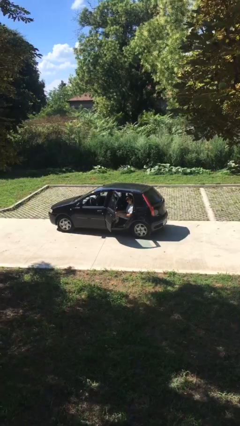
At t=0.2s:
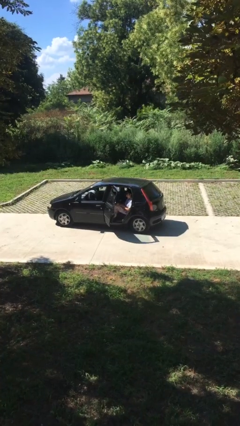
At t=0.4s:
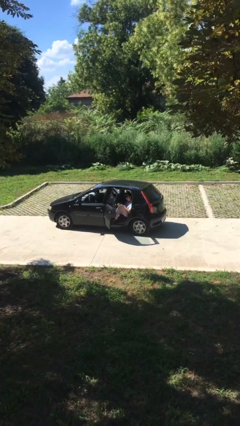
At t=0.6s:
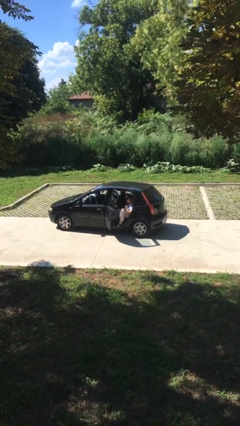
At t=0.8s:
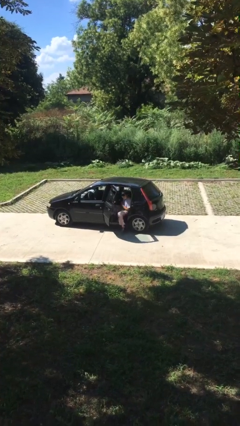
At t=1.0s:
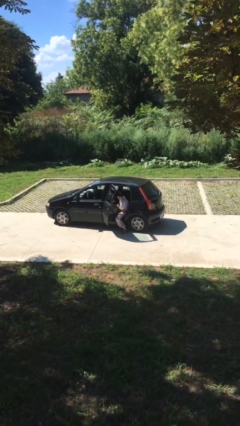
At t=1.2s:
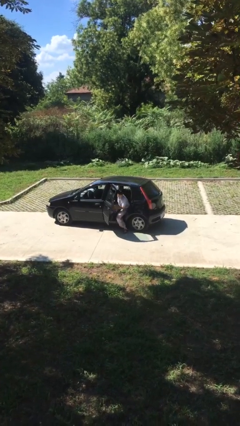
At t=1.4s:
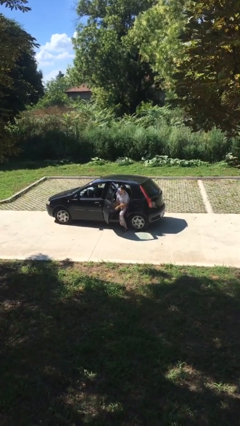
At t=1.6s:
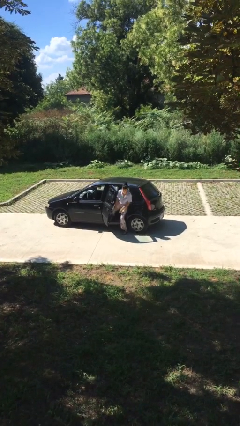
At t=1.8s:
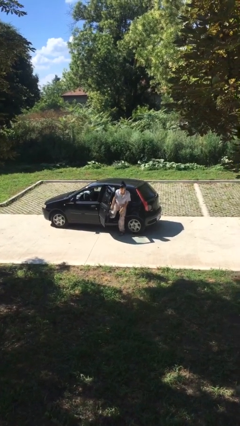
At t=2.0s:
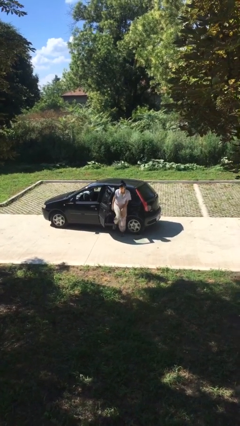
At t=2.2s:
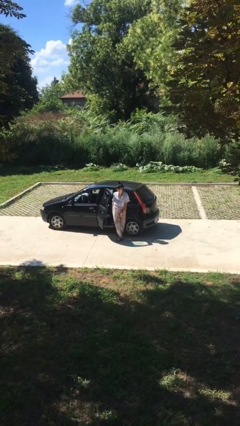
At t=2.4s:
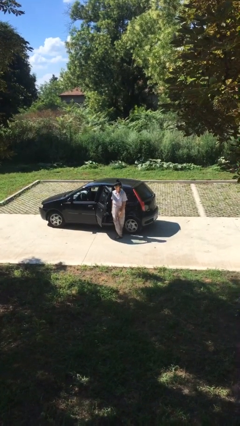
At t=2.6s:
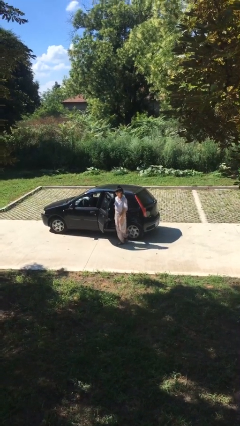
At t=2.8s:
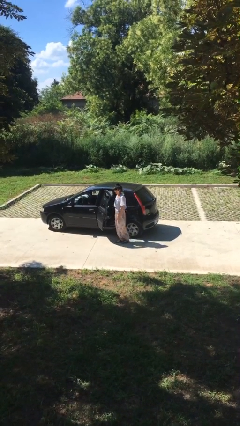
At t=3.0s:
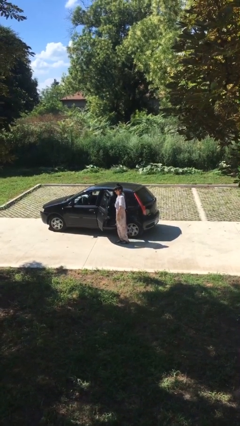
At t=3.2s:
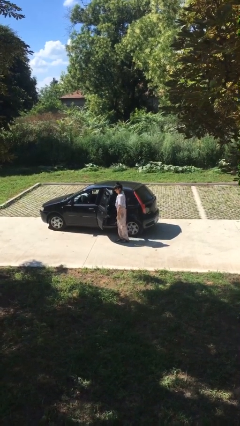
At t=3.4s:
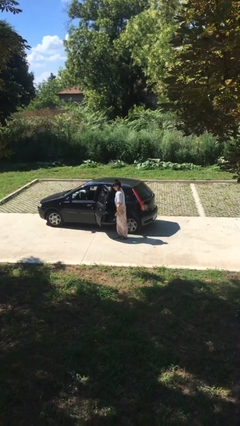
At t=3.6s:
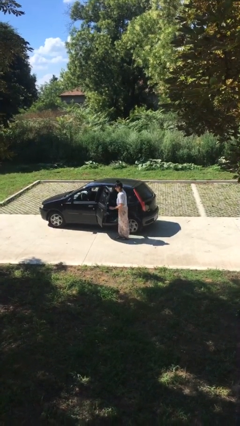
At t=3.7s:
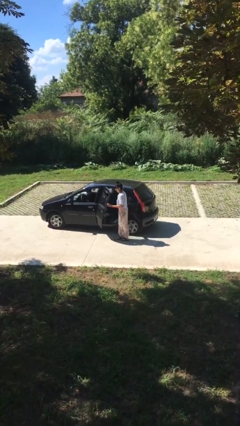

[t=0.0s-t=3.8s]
person exits car

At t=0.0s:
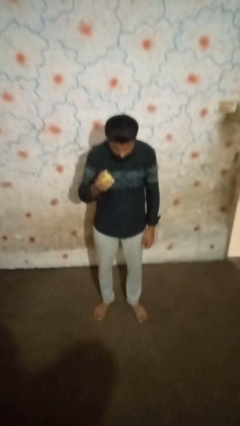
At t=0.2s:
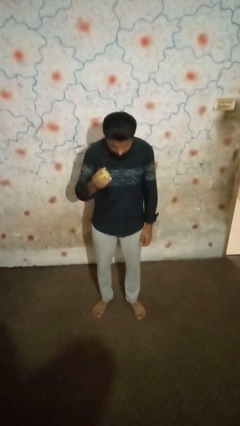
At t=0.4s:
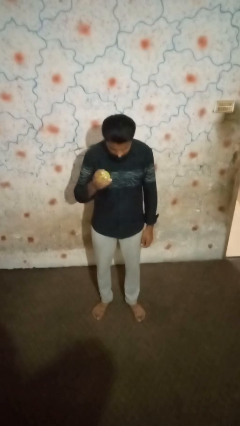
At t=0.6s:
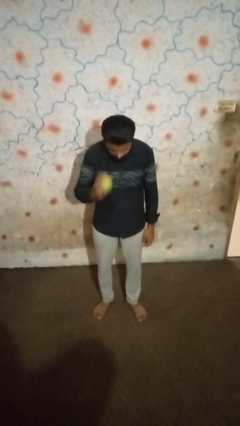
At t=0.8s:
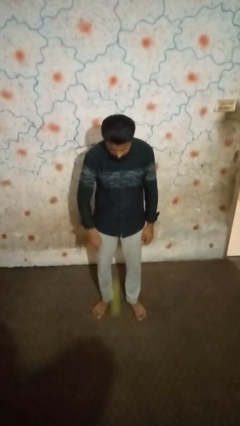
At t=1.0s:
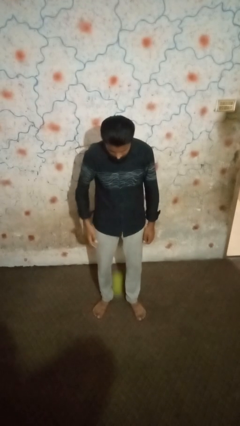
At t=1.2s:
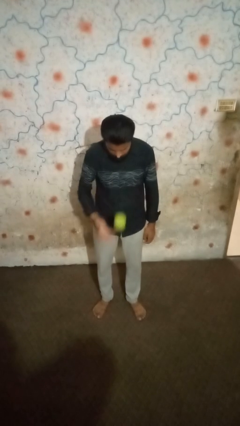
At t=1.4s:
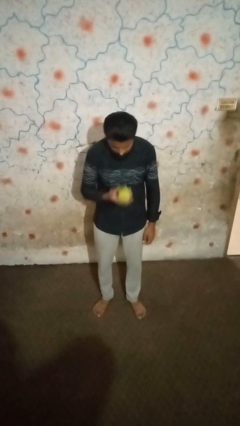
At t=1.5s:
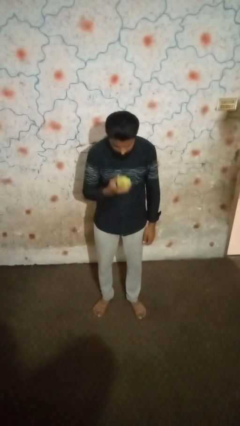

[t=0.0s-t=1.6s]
person bounces ball on floor

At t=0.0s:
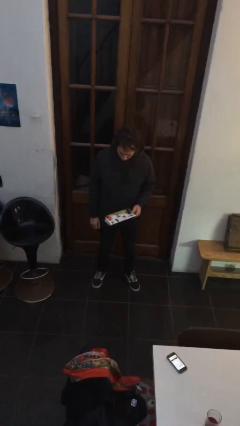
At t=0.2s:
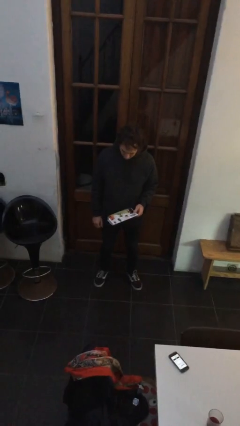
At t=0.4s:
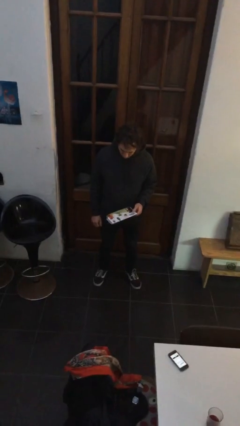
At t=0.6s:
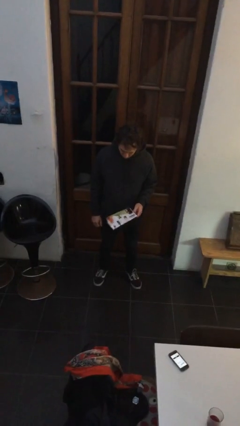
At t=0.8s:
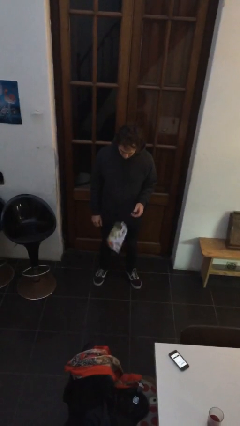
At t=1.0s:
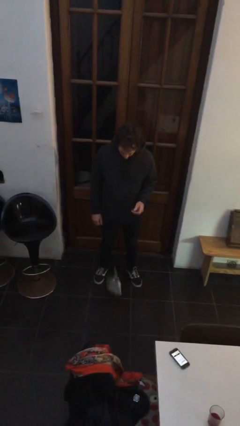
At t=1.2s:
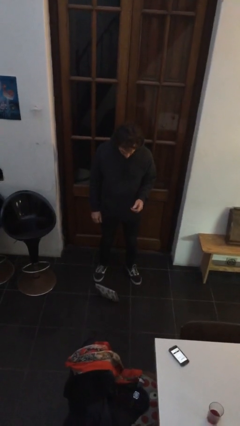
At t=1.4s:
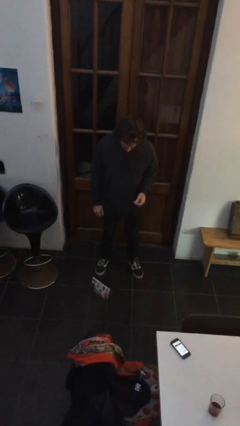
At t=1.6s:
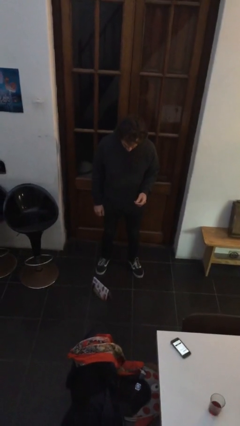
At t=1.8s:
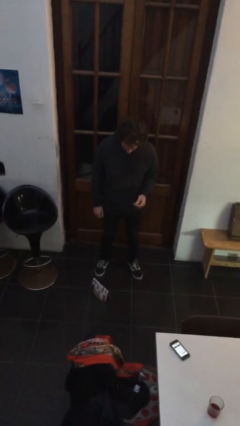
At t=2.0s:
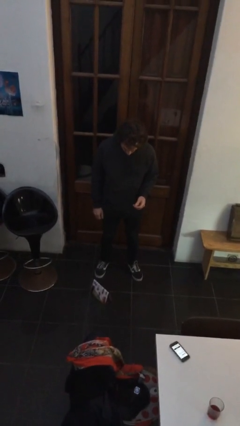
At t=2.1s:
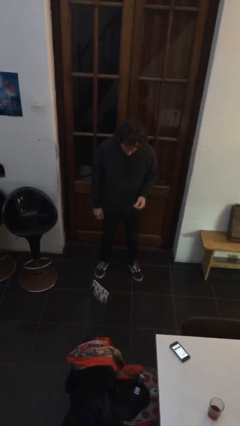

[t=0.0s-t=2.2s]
person drops object

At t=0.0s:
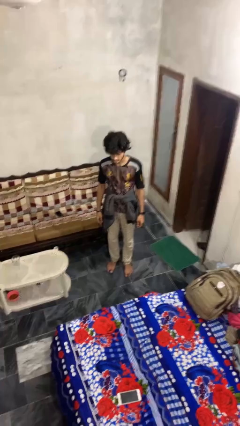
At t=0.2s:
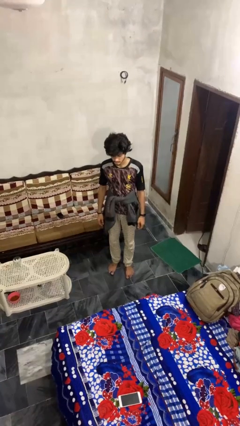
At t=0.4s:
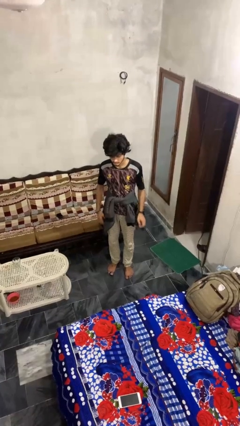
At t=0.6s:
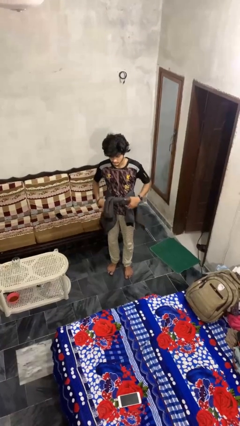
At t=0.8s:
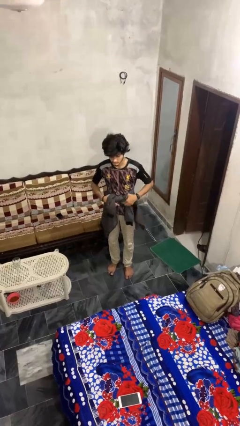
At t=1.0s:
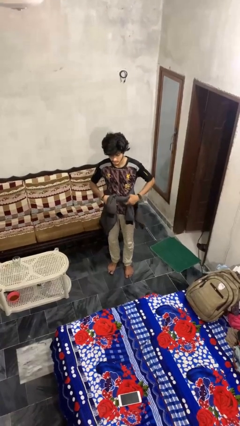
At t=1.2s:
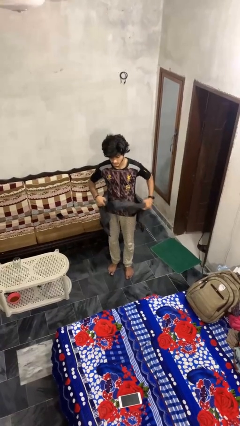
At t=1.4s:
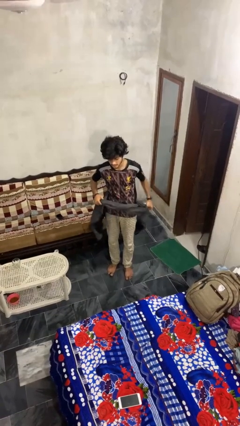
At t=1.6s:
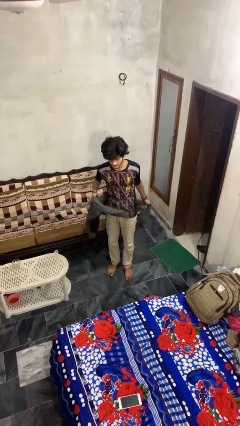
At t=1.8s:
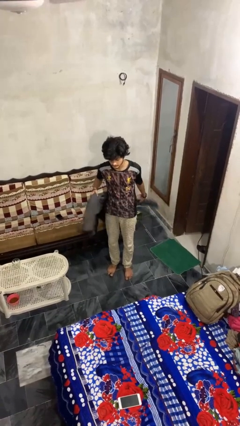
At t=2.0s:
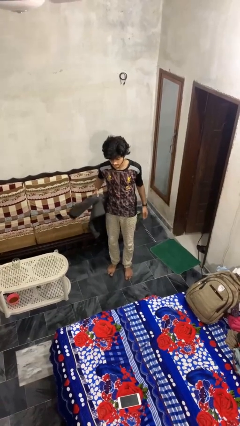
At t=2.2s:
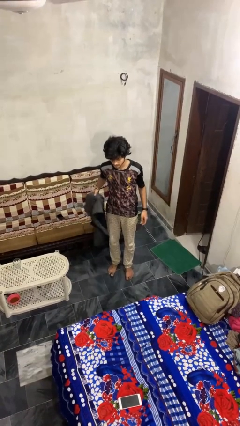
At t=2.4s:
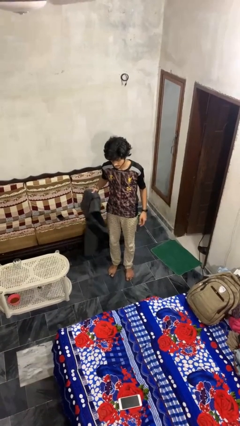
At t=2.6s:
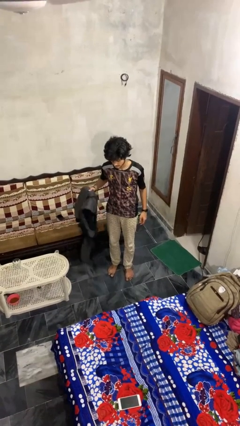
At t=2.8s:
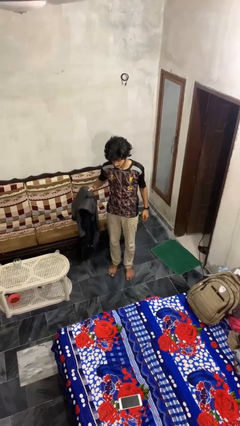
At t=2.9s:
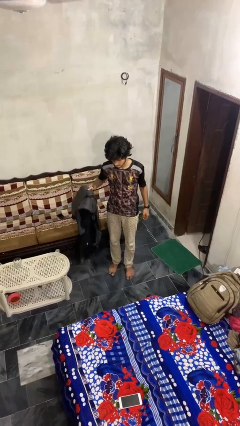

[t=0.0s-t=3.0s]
person unties jacket around waist

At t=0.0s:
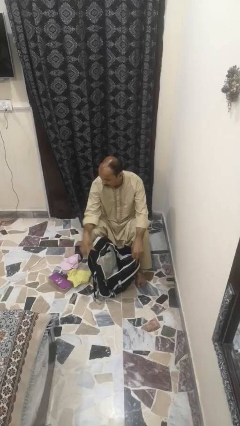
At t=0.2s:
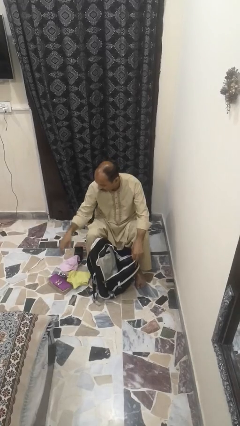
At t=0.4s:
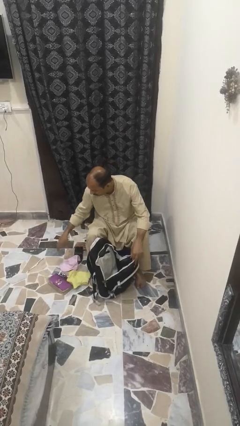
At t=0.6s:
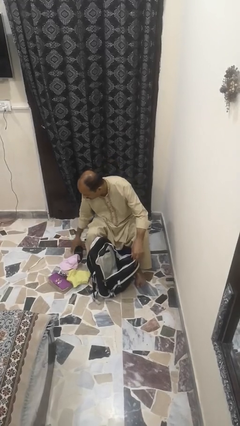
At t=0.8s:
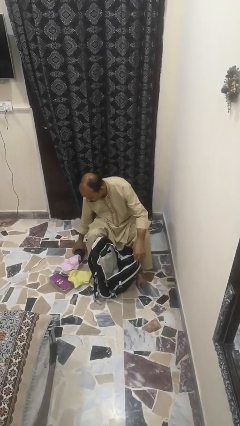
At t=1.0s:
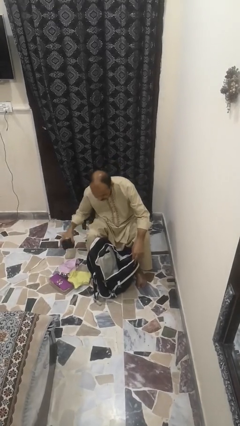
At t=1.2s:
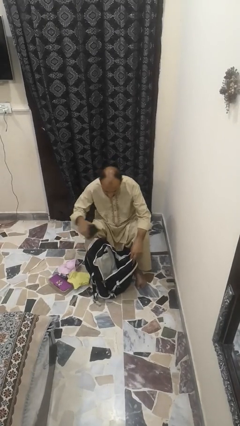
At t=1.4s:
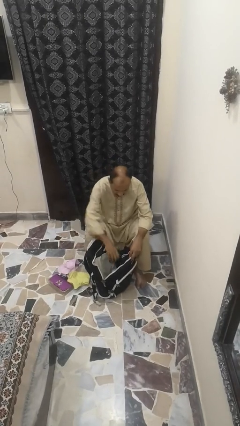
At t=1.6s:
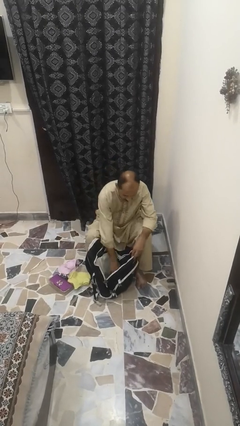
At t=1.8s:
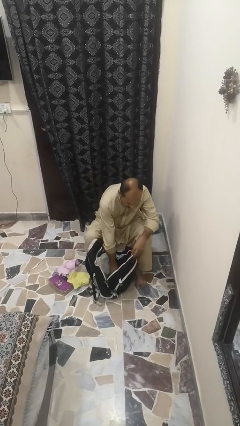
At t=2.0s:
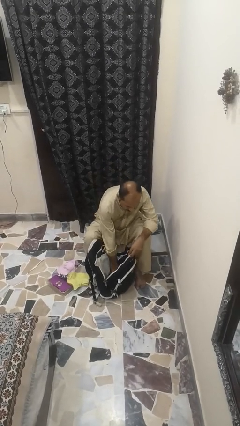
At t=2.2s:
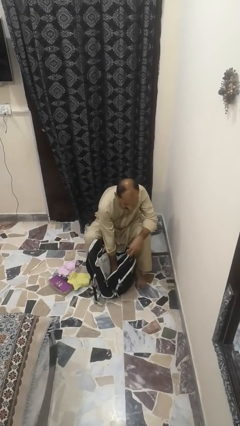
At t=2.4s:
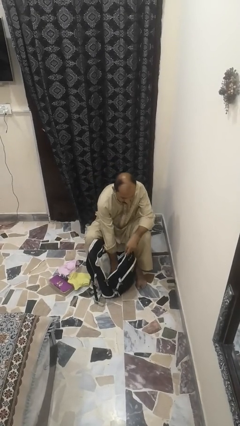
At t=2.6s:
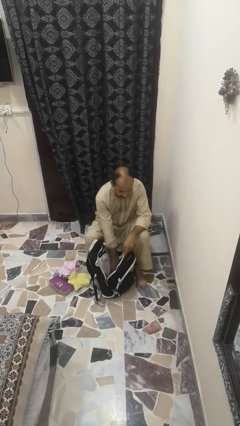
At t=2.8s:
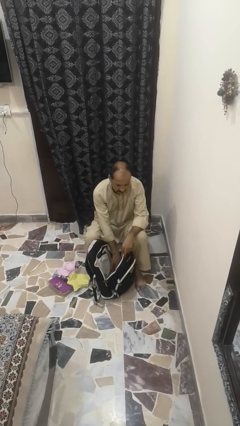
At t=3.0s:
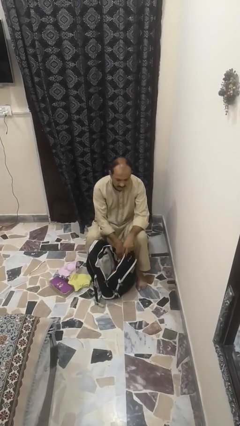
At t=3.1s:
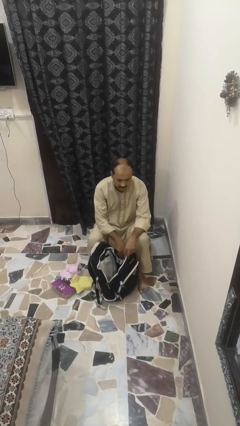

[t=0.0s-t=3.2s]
person puts on backpack

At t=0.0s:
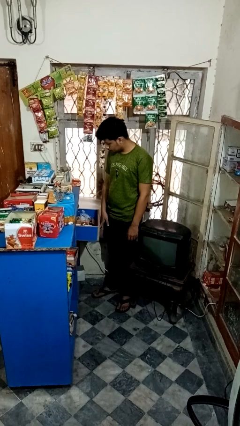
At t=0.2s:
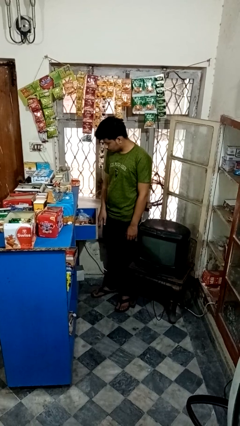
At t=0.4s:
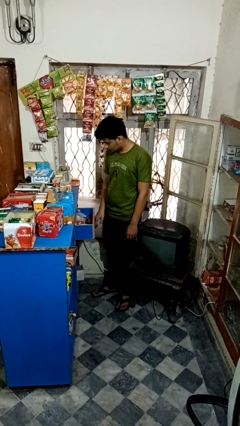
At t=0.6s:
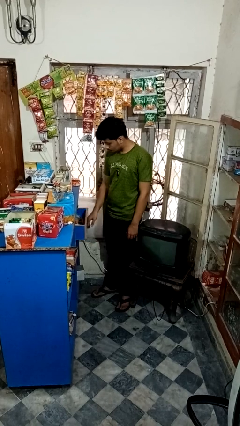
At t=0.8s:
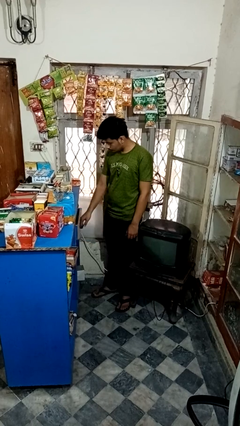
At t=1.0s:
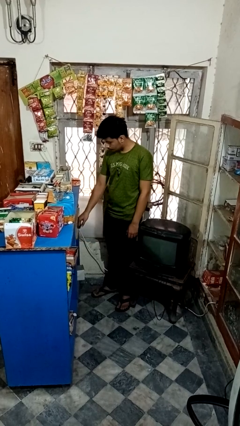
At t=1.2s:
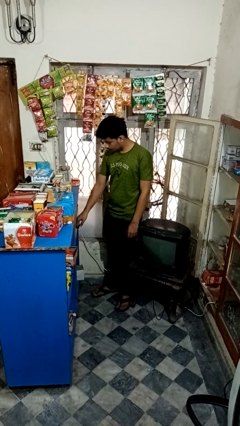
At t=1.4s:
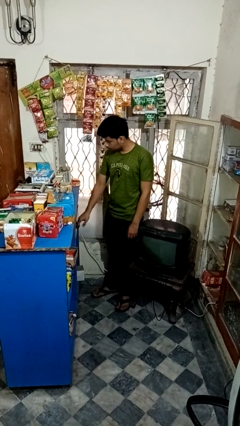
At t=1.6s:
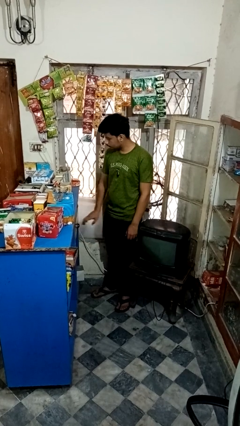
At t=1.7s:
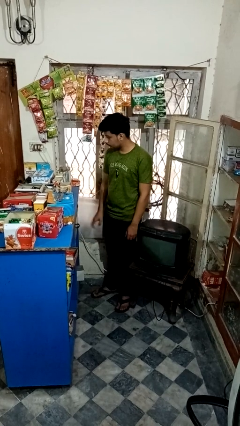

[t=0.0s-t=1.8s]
person closes kitchen drawer

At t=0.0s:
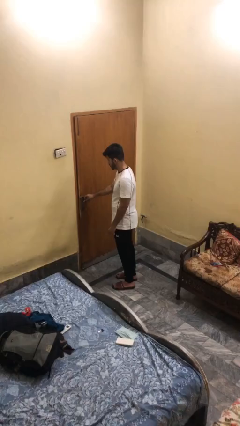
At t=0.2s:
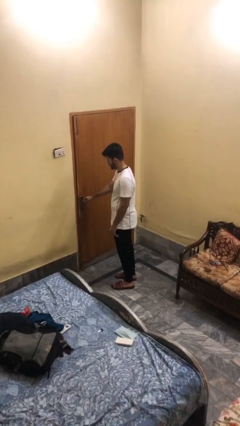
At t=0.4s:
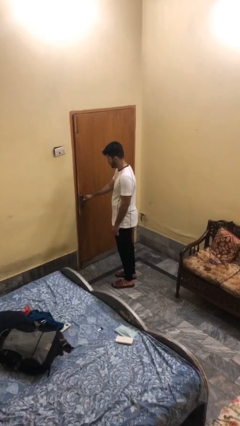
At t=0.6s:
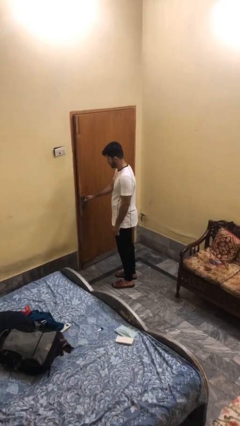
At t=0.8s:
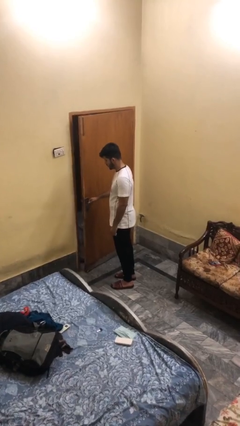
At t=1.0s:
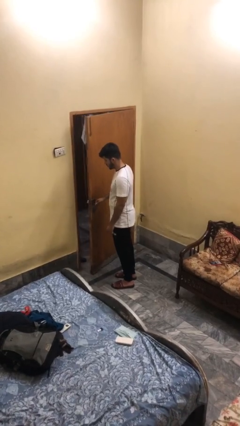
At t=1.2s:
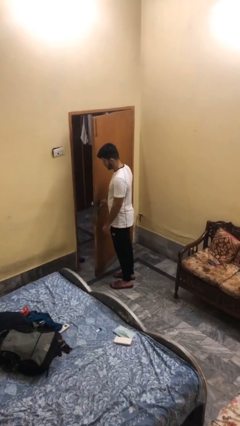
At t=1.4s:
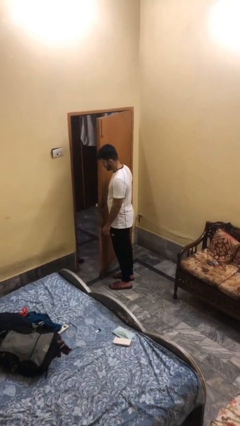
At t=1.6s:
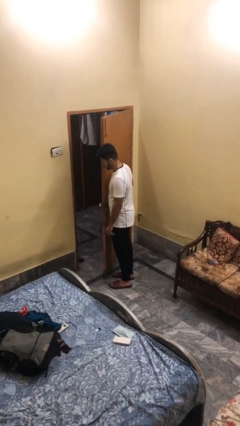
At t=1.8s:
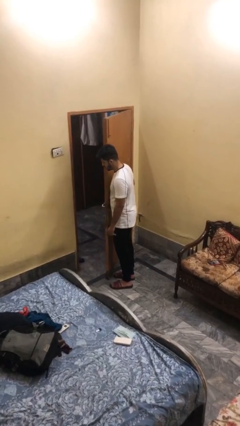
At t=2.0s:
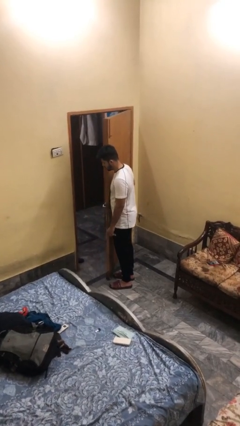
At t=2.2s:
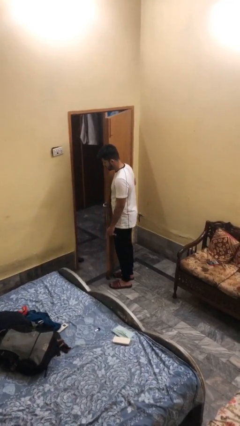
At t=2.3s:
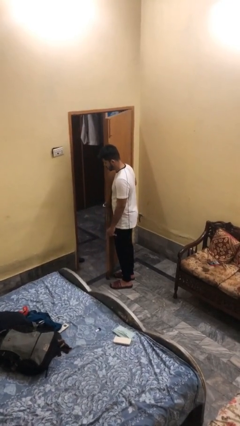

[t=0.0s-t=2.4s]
person opens facility door
